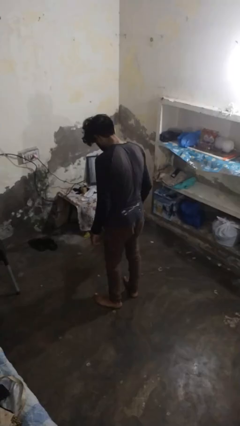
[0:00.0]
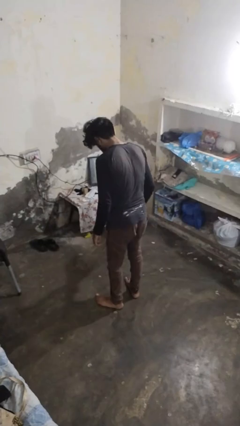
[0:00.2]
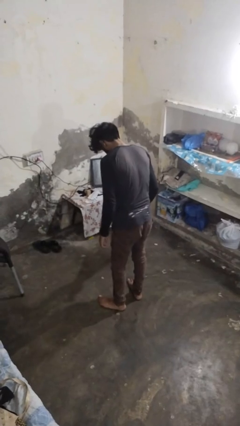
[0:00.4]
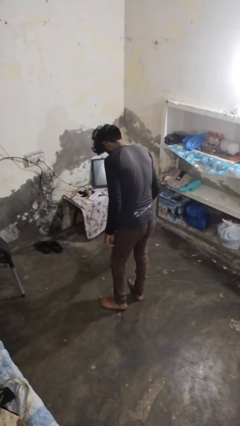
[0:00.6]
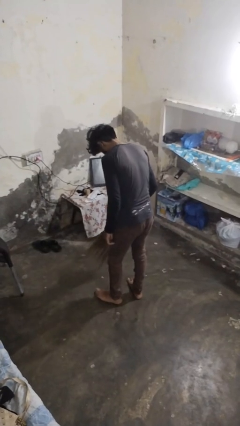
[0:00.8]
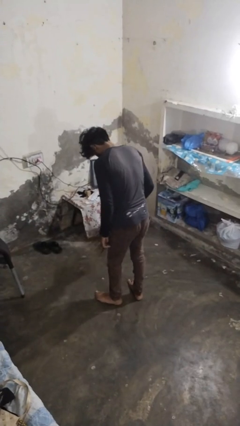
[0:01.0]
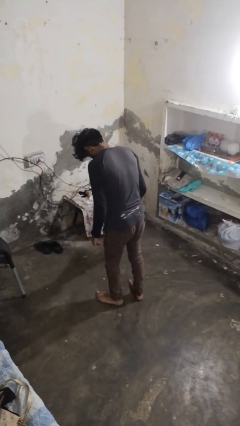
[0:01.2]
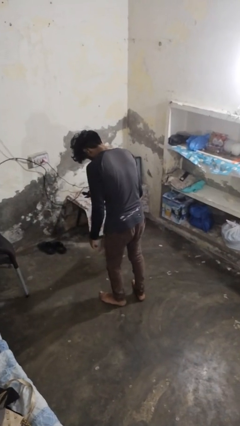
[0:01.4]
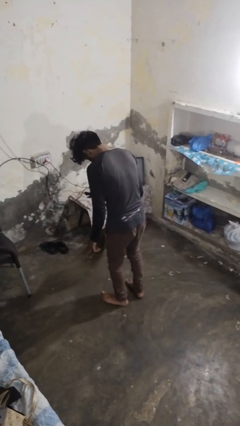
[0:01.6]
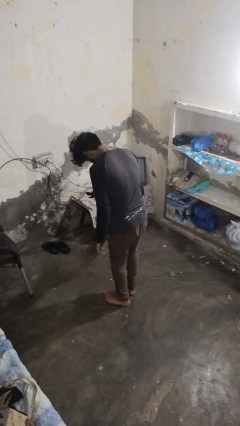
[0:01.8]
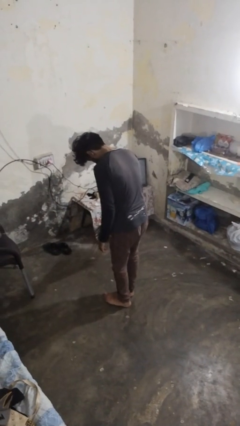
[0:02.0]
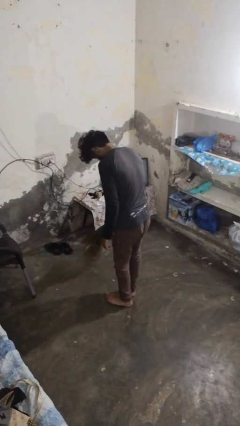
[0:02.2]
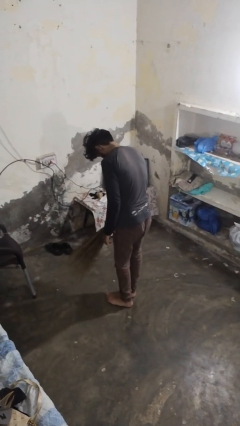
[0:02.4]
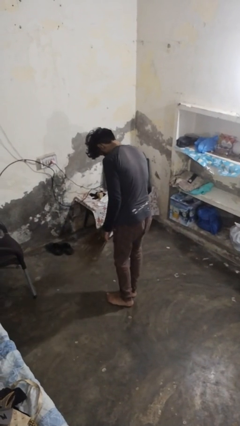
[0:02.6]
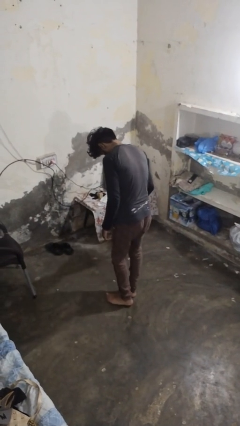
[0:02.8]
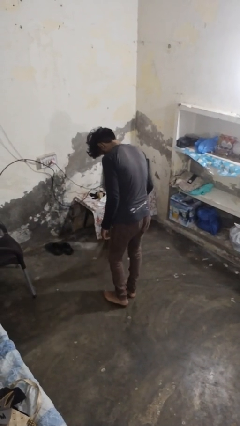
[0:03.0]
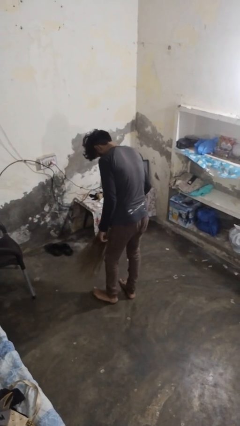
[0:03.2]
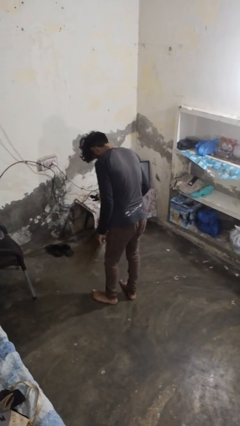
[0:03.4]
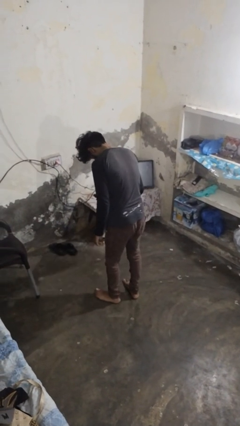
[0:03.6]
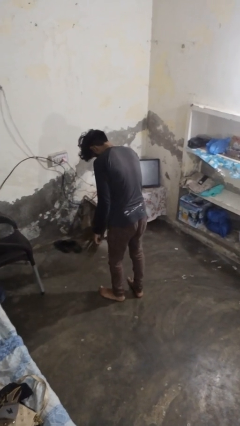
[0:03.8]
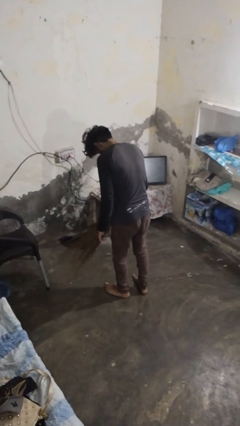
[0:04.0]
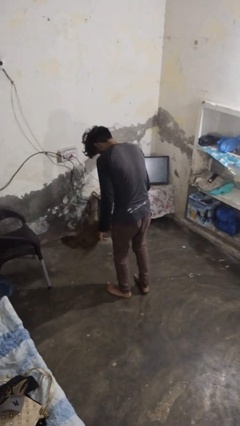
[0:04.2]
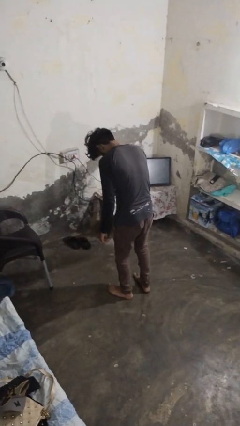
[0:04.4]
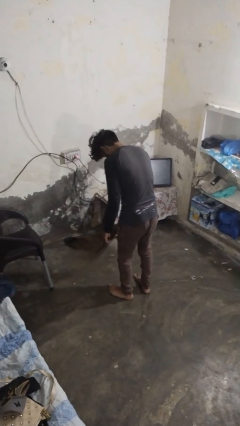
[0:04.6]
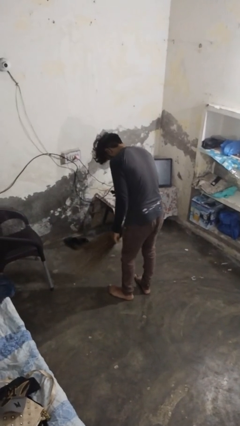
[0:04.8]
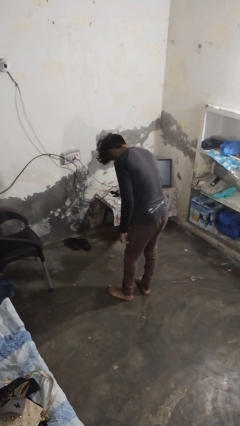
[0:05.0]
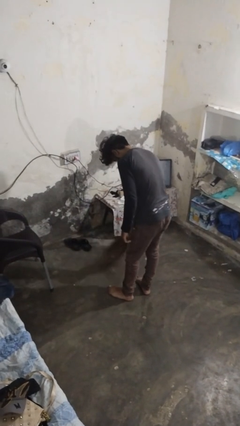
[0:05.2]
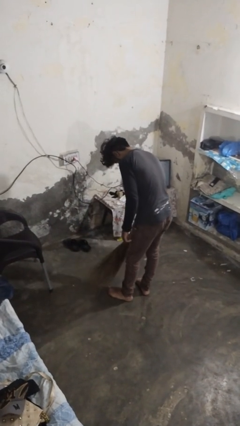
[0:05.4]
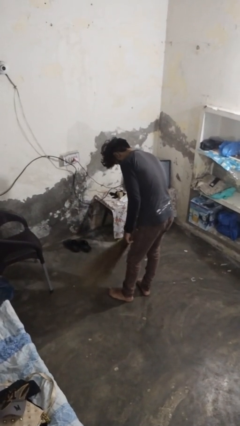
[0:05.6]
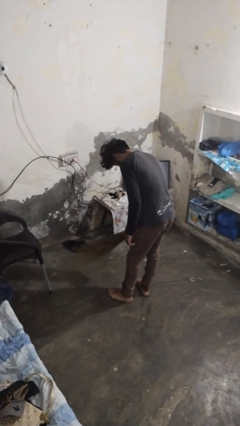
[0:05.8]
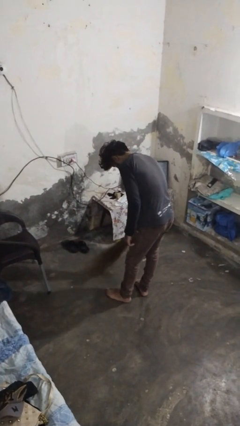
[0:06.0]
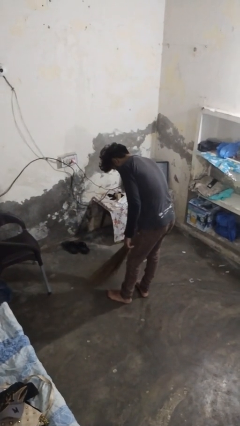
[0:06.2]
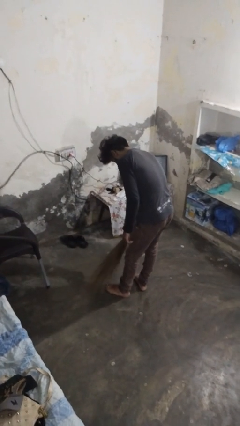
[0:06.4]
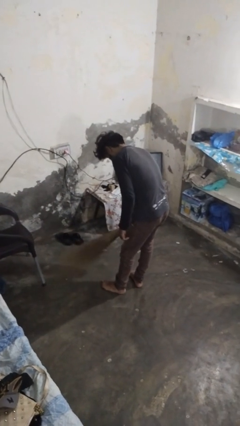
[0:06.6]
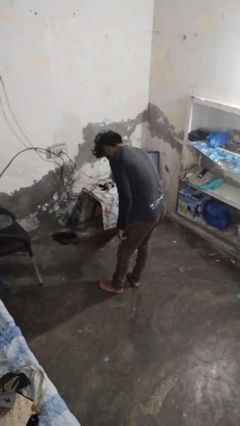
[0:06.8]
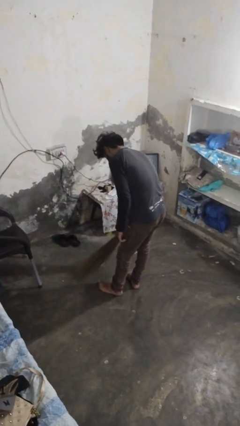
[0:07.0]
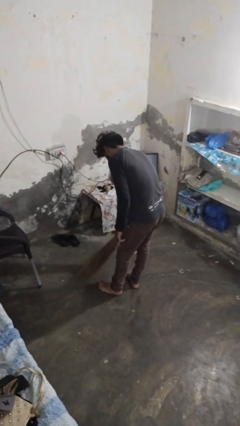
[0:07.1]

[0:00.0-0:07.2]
person sweeps floor

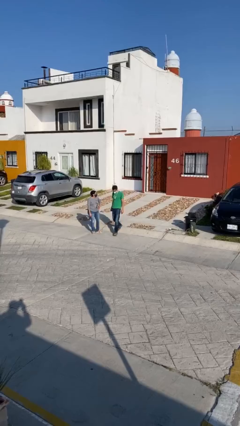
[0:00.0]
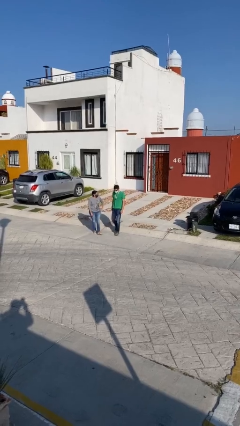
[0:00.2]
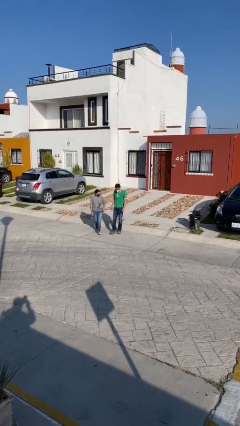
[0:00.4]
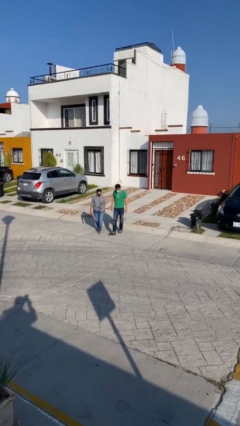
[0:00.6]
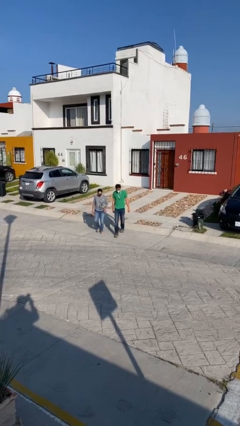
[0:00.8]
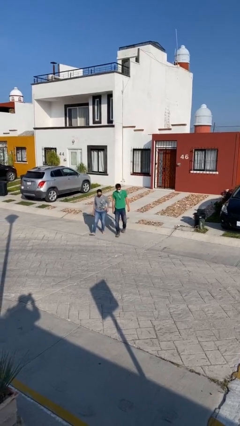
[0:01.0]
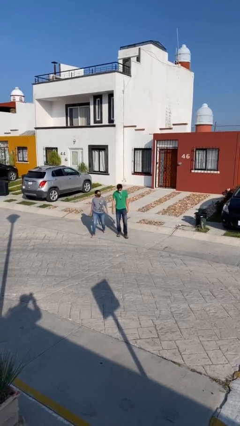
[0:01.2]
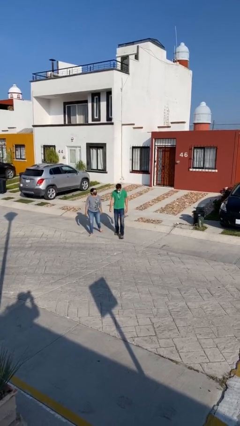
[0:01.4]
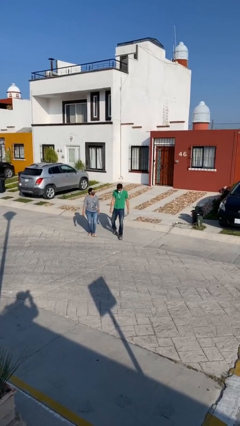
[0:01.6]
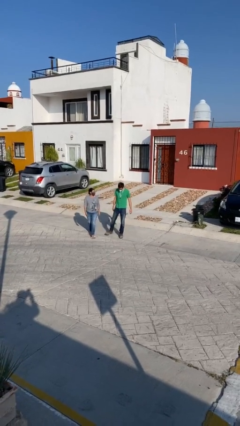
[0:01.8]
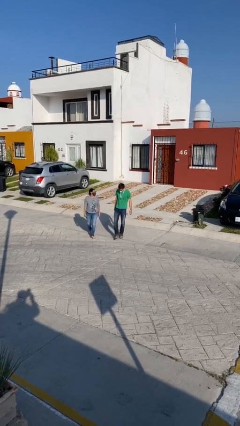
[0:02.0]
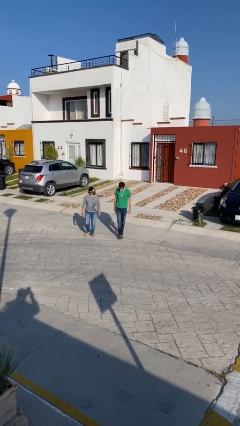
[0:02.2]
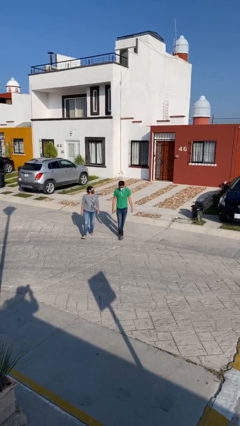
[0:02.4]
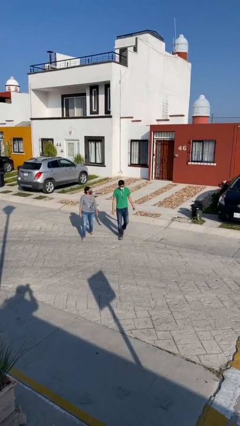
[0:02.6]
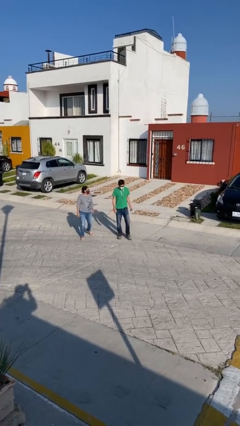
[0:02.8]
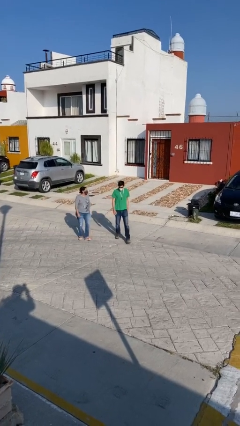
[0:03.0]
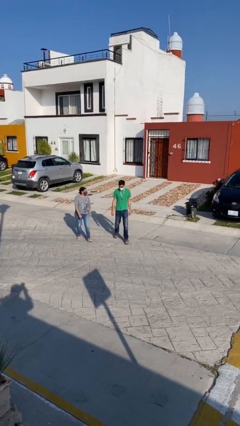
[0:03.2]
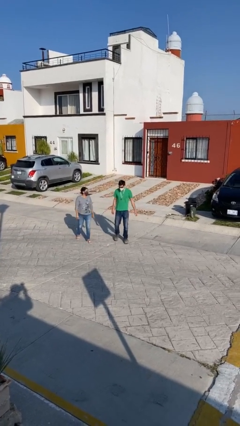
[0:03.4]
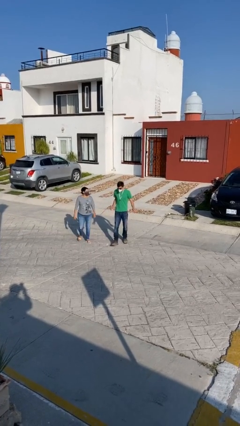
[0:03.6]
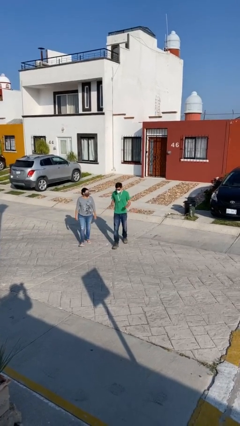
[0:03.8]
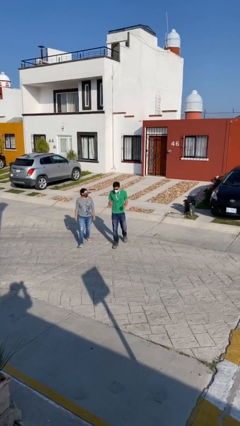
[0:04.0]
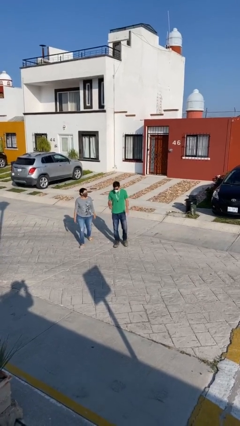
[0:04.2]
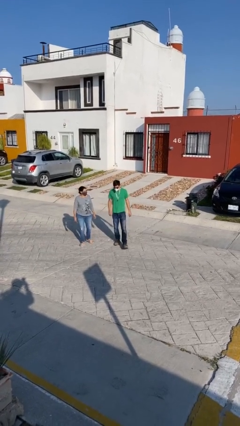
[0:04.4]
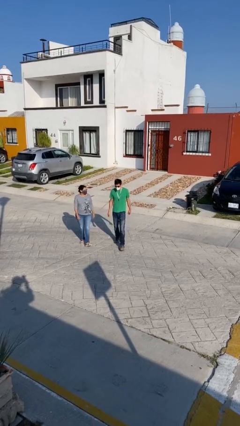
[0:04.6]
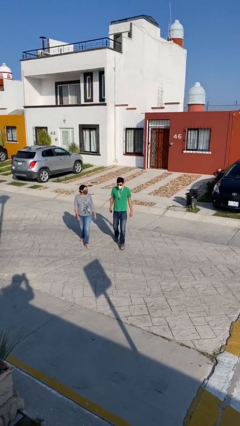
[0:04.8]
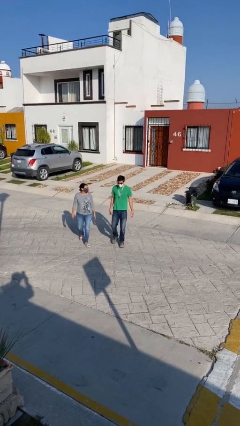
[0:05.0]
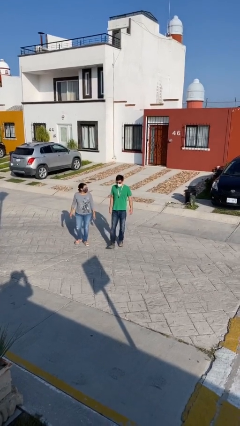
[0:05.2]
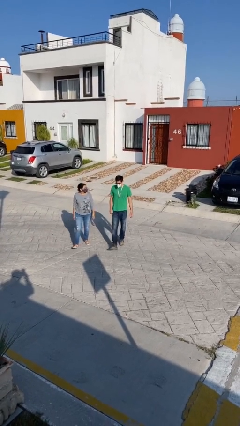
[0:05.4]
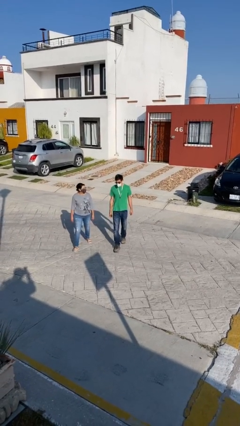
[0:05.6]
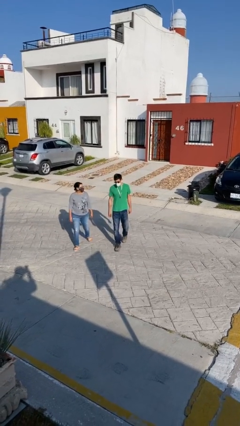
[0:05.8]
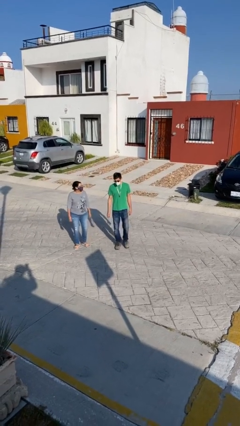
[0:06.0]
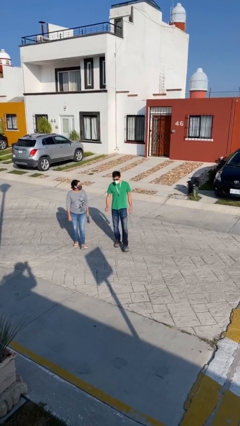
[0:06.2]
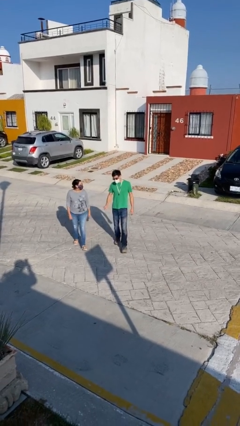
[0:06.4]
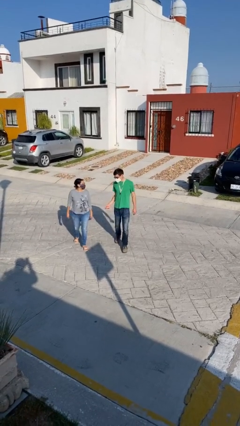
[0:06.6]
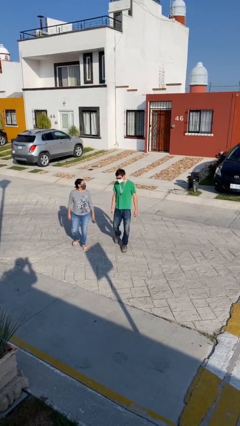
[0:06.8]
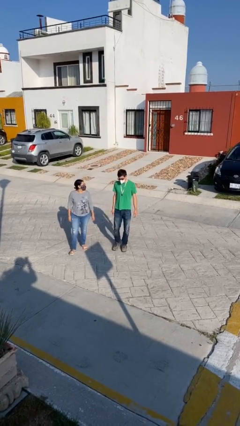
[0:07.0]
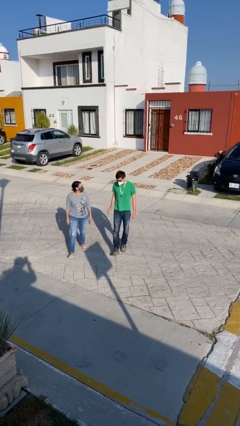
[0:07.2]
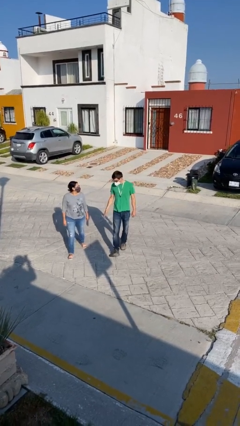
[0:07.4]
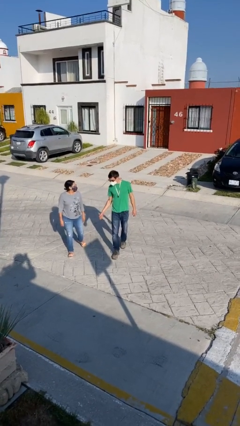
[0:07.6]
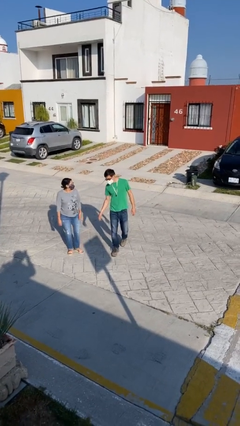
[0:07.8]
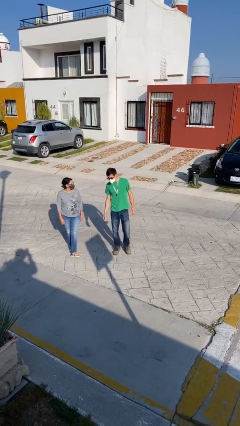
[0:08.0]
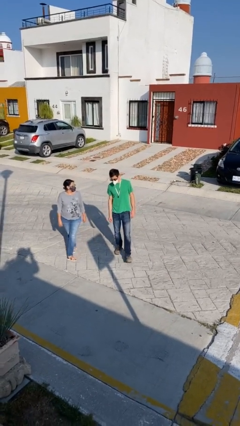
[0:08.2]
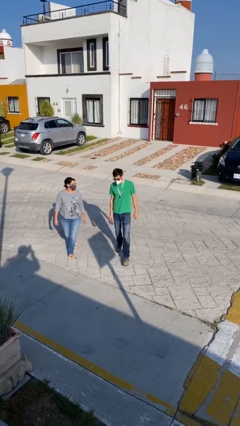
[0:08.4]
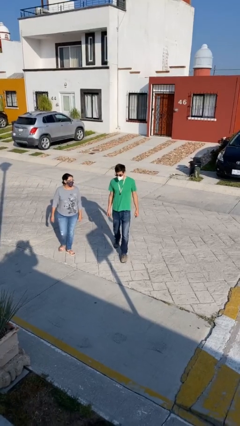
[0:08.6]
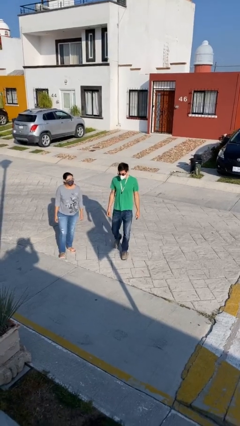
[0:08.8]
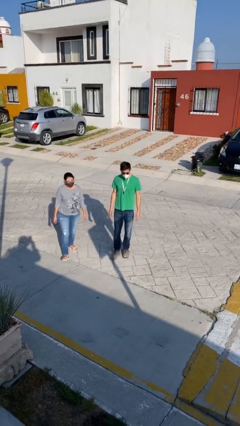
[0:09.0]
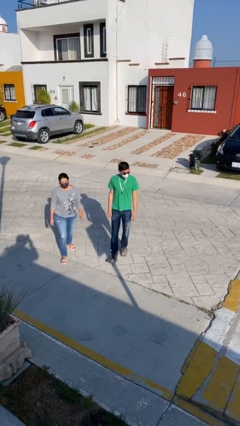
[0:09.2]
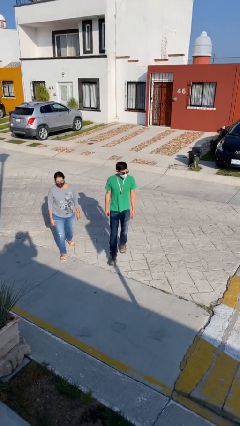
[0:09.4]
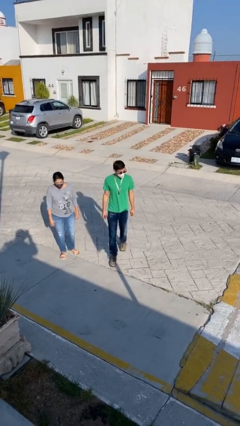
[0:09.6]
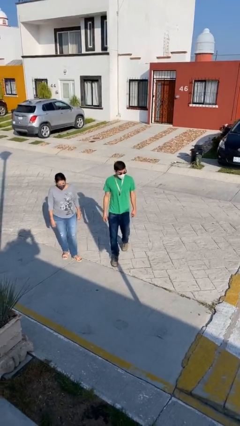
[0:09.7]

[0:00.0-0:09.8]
person talks to person

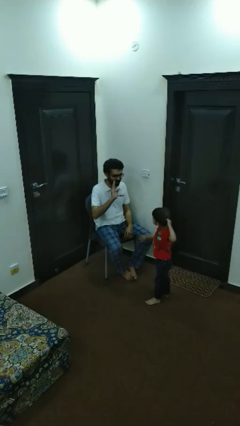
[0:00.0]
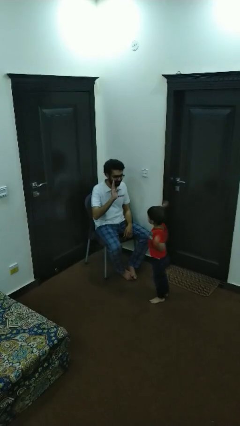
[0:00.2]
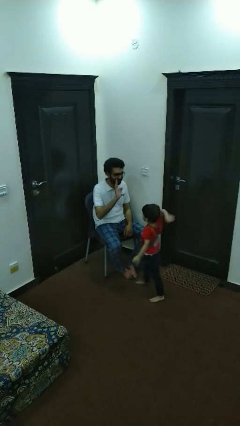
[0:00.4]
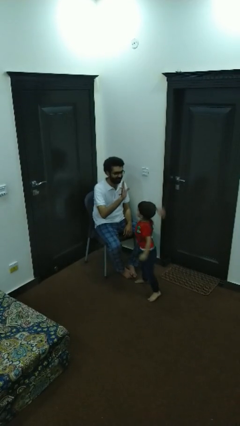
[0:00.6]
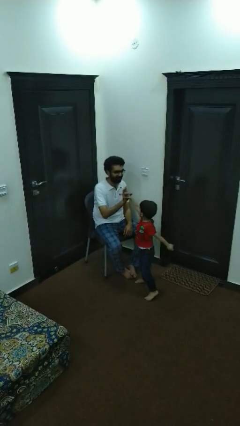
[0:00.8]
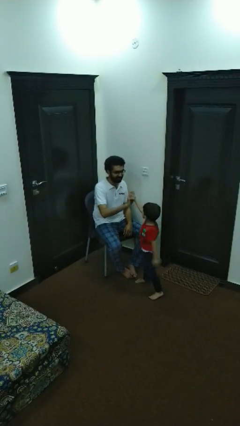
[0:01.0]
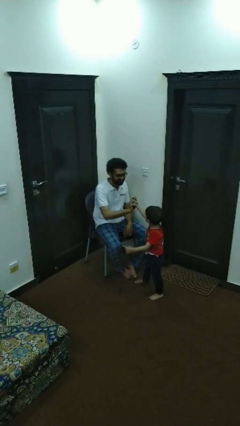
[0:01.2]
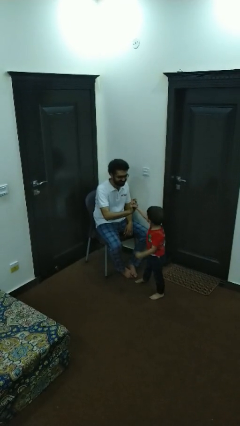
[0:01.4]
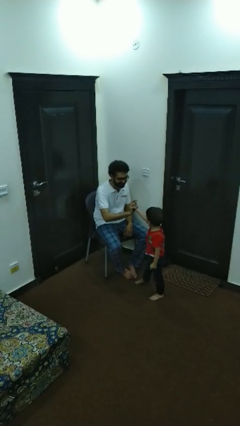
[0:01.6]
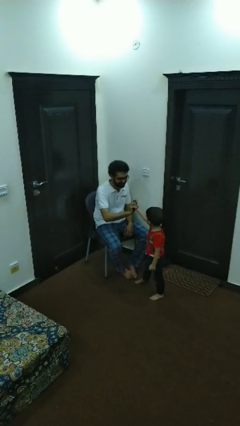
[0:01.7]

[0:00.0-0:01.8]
person highfives hand
